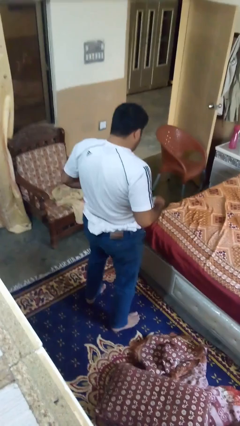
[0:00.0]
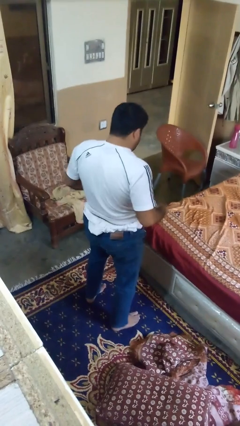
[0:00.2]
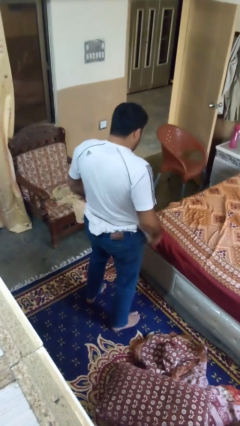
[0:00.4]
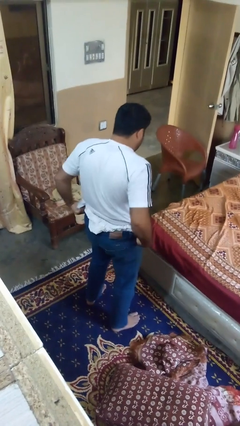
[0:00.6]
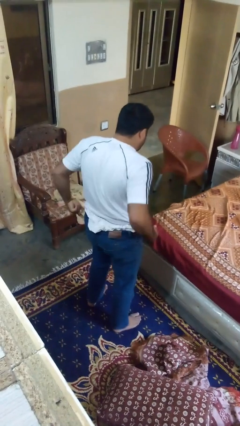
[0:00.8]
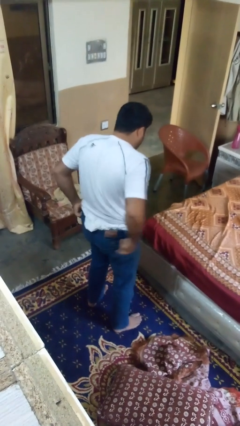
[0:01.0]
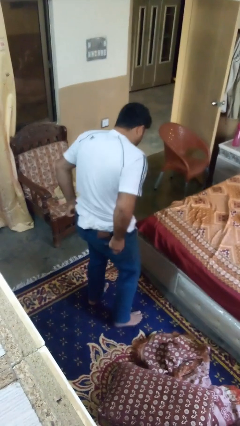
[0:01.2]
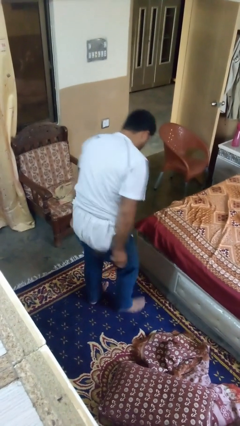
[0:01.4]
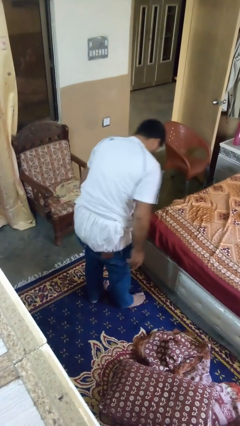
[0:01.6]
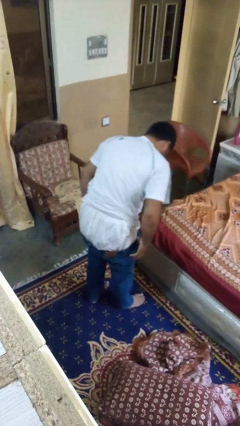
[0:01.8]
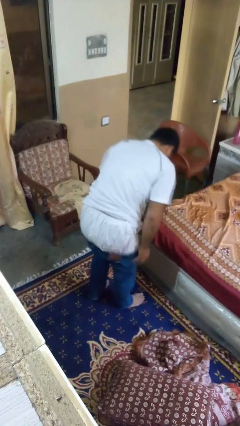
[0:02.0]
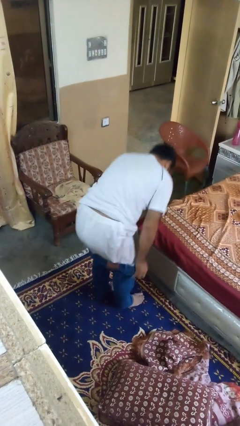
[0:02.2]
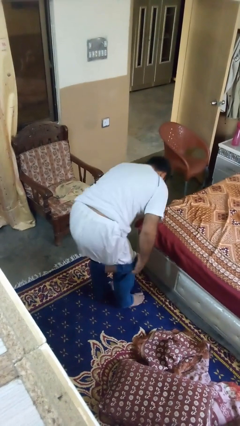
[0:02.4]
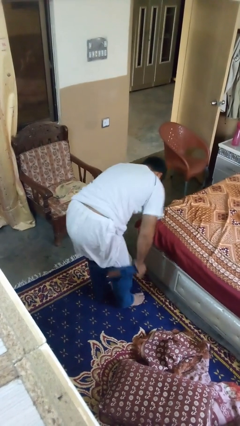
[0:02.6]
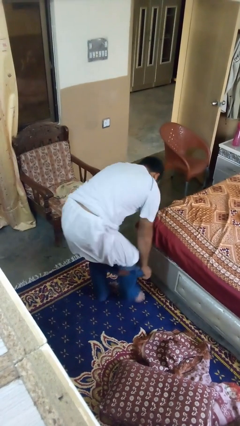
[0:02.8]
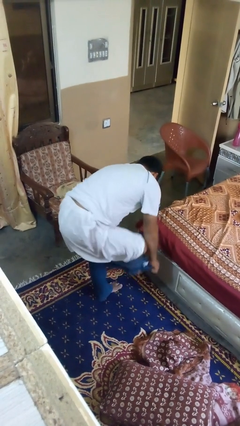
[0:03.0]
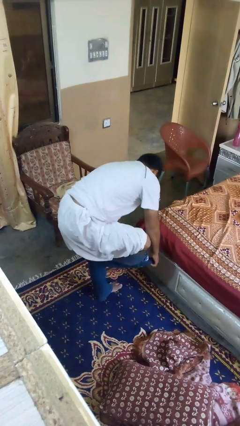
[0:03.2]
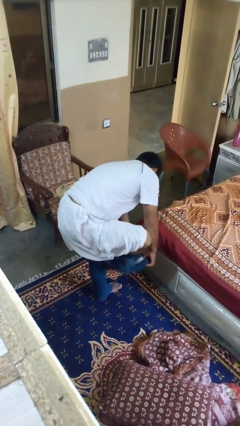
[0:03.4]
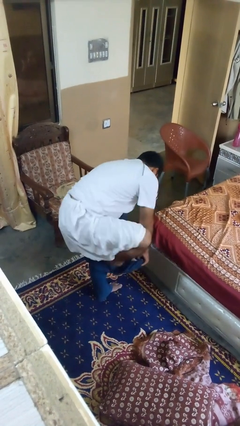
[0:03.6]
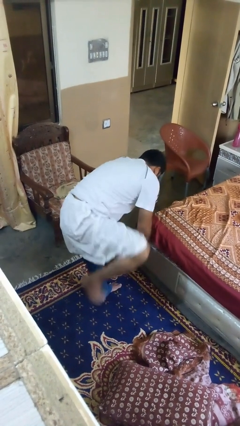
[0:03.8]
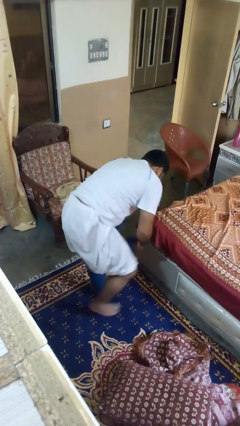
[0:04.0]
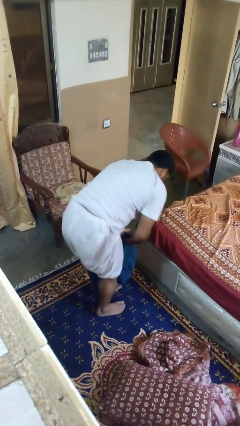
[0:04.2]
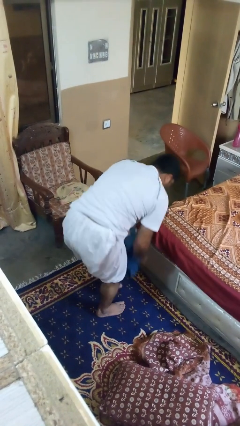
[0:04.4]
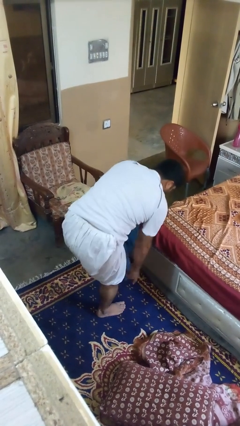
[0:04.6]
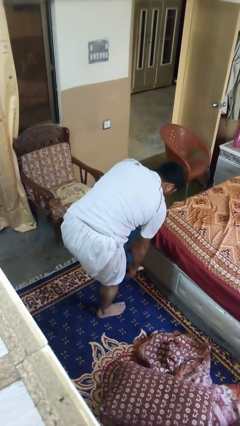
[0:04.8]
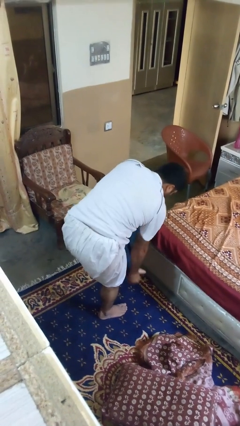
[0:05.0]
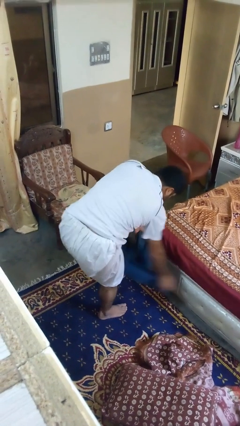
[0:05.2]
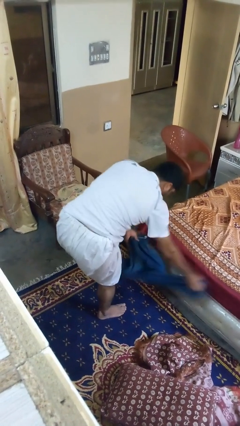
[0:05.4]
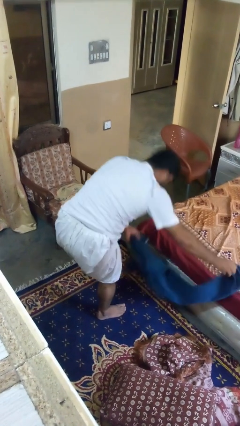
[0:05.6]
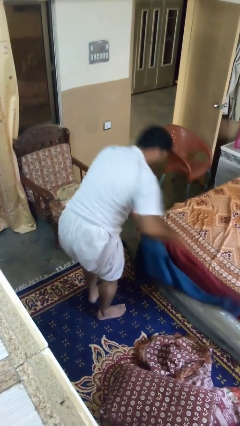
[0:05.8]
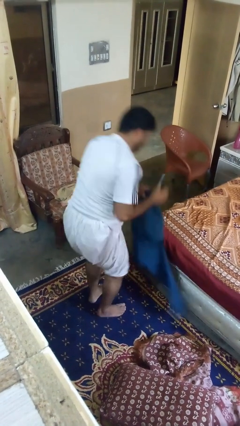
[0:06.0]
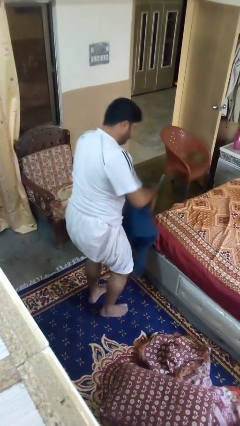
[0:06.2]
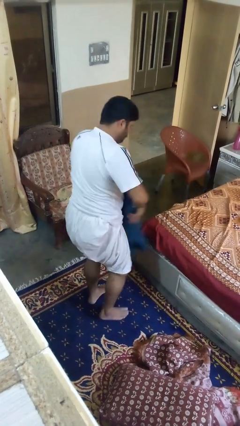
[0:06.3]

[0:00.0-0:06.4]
person takes off pants

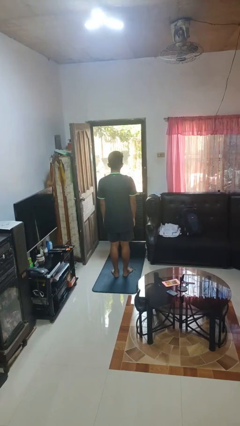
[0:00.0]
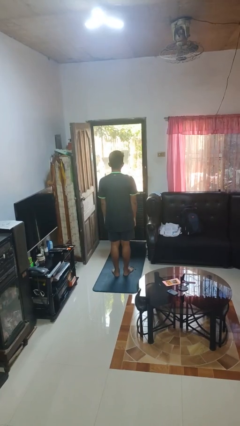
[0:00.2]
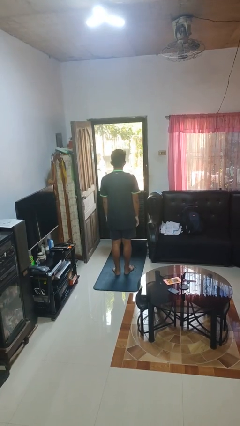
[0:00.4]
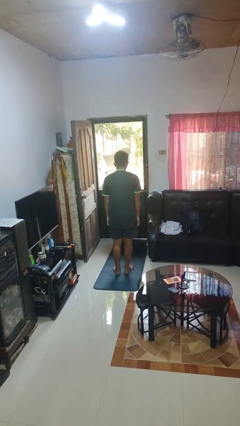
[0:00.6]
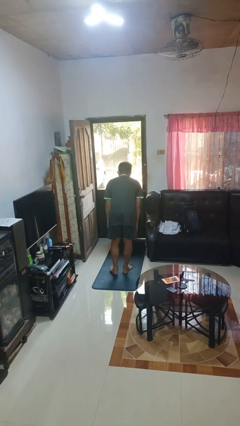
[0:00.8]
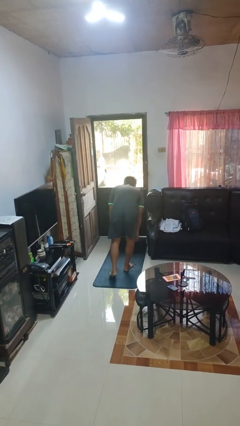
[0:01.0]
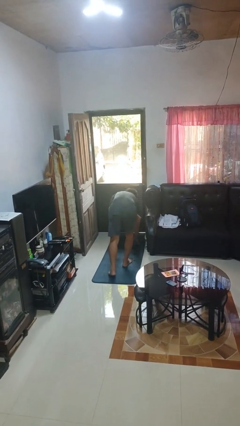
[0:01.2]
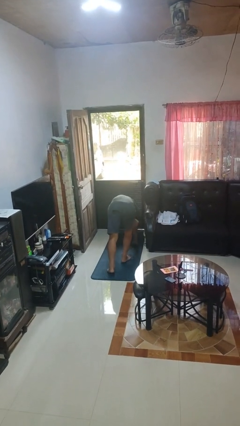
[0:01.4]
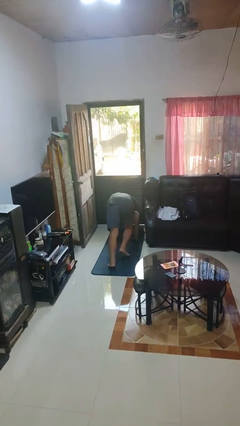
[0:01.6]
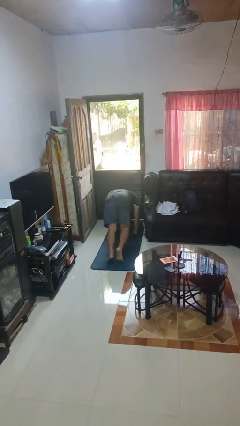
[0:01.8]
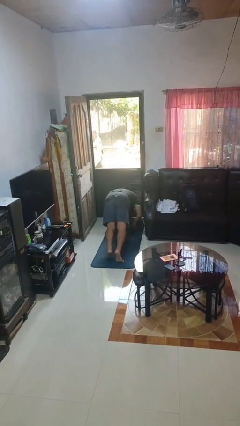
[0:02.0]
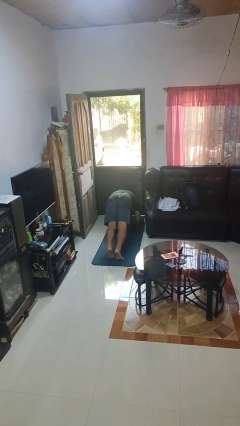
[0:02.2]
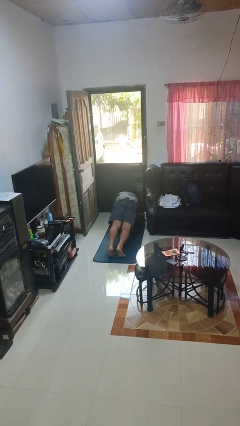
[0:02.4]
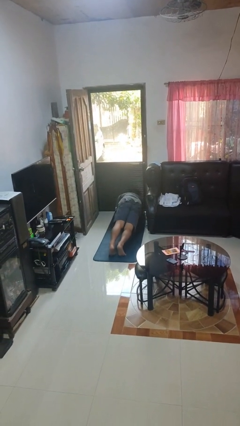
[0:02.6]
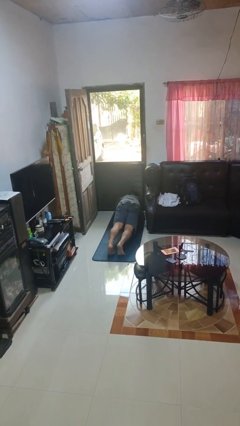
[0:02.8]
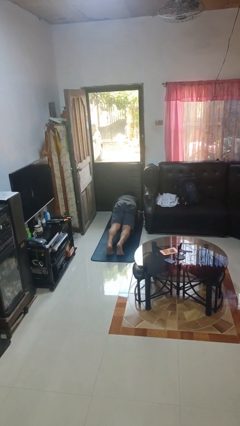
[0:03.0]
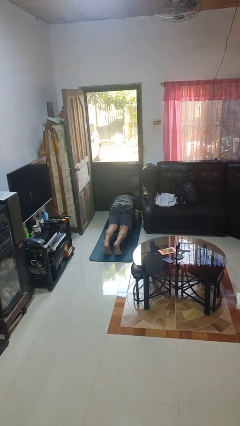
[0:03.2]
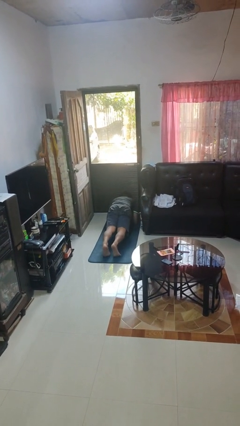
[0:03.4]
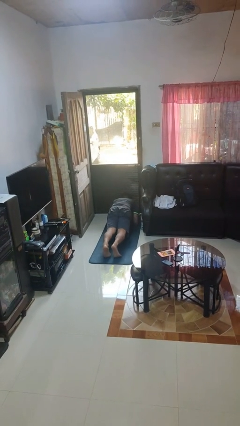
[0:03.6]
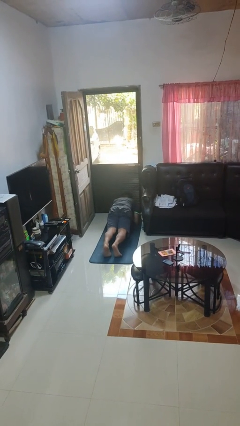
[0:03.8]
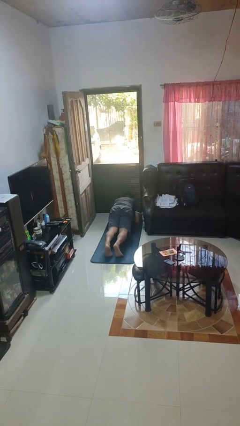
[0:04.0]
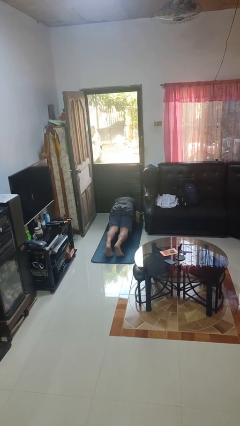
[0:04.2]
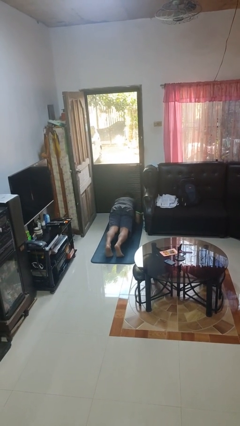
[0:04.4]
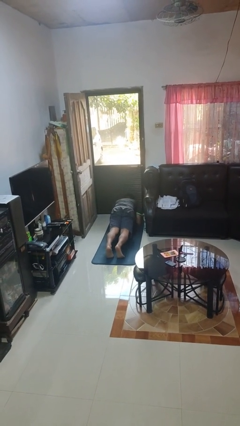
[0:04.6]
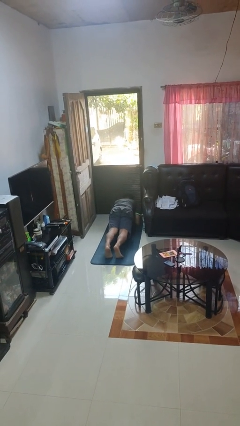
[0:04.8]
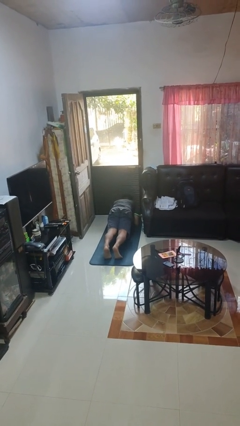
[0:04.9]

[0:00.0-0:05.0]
person exercises with plank

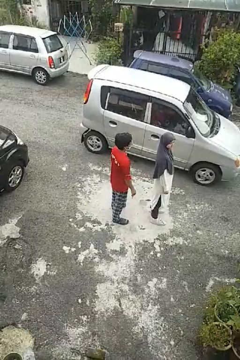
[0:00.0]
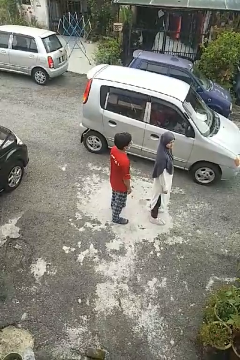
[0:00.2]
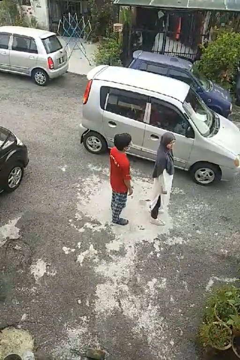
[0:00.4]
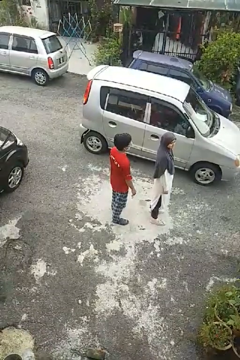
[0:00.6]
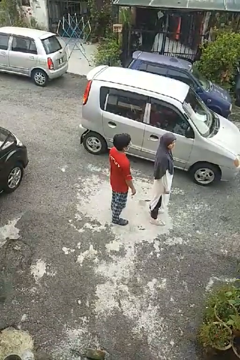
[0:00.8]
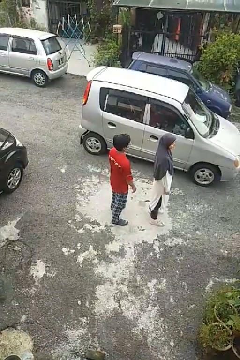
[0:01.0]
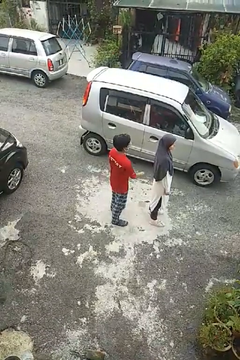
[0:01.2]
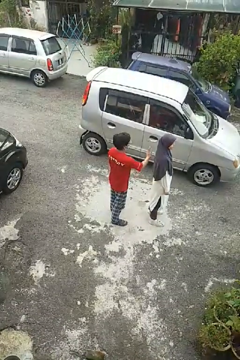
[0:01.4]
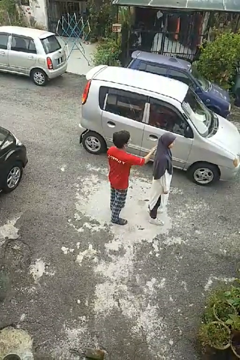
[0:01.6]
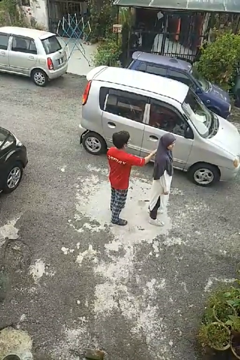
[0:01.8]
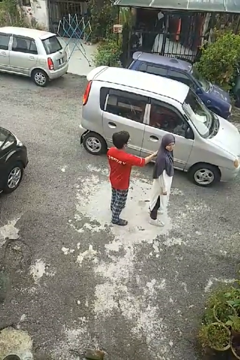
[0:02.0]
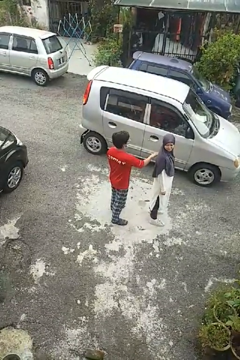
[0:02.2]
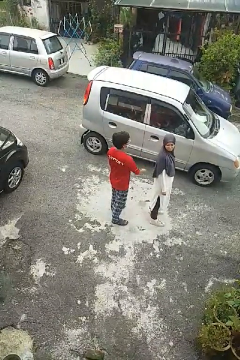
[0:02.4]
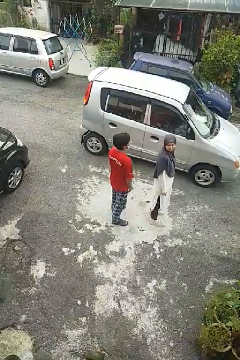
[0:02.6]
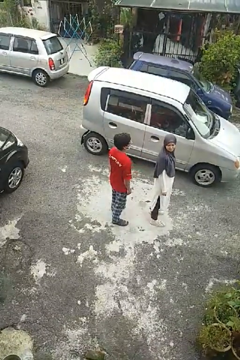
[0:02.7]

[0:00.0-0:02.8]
person touches back of person

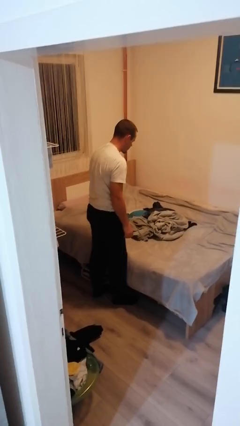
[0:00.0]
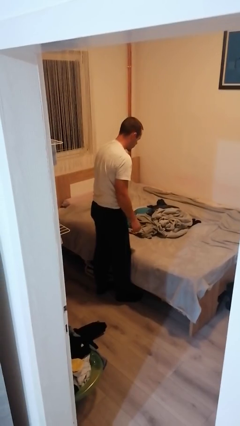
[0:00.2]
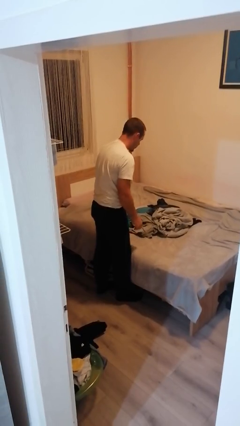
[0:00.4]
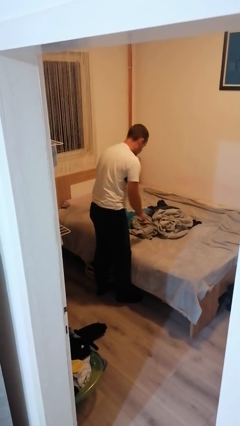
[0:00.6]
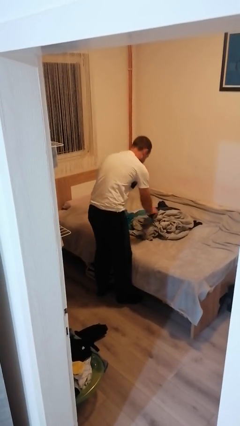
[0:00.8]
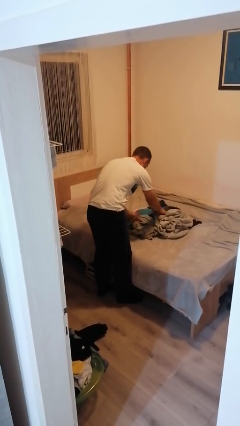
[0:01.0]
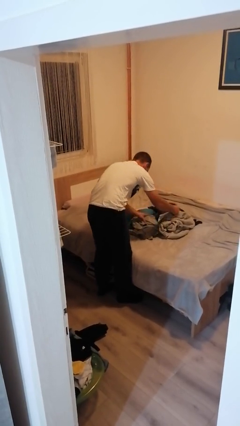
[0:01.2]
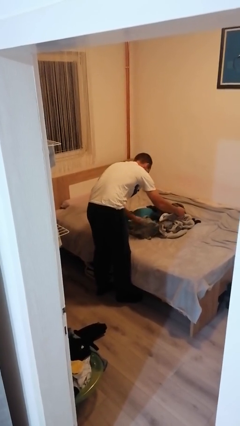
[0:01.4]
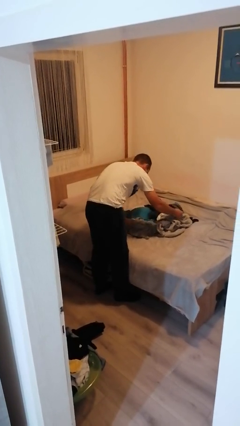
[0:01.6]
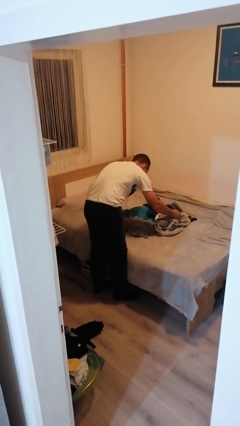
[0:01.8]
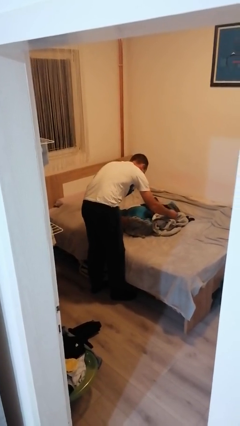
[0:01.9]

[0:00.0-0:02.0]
person searches under bed

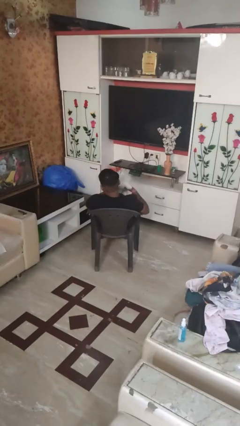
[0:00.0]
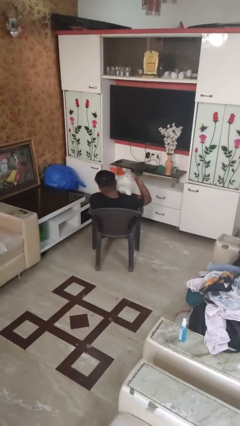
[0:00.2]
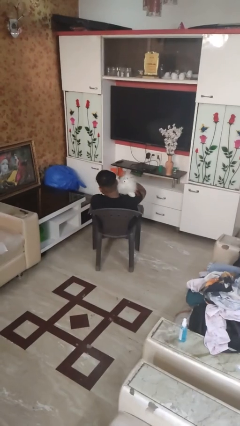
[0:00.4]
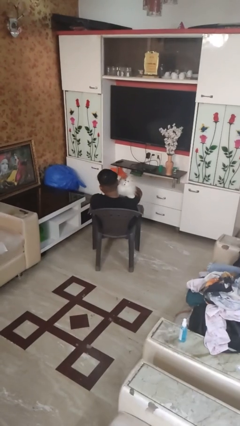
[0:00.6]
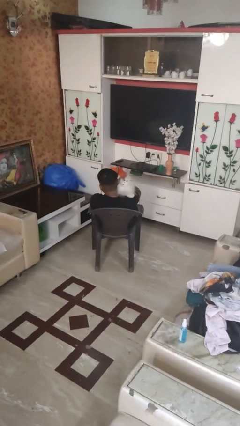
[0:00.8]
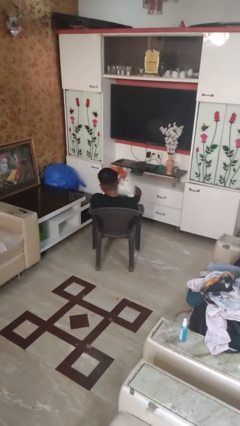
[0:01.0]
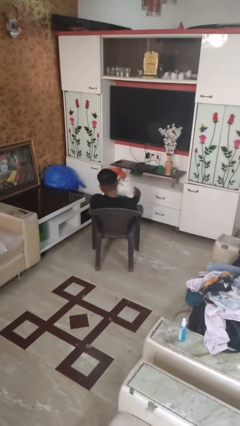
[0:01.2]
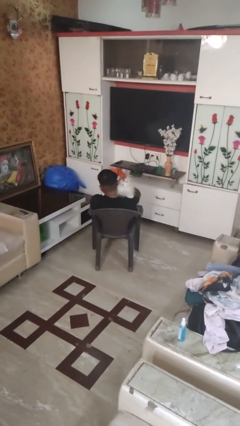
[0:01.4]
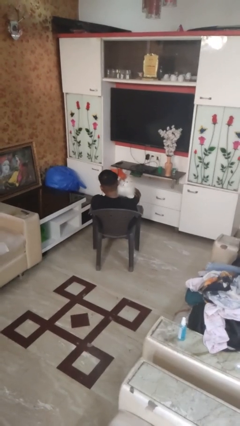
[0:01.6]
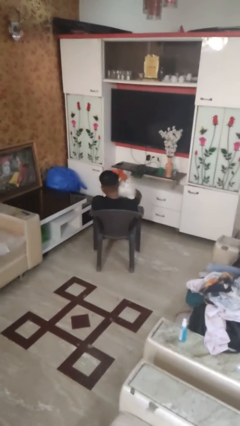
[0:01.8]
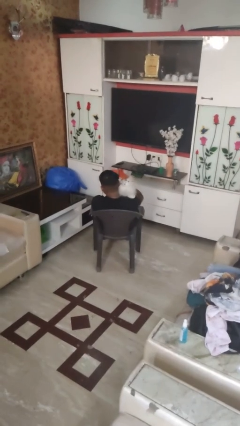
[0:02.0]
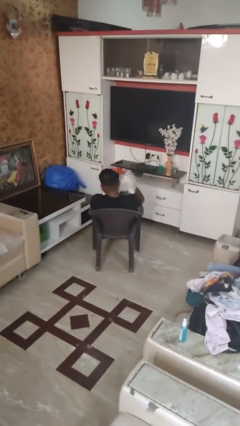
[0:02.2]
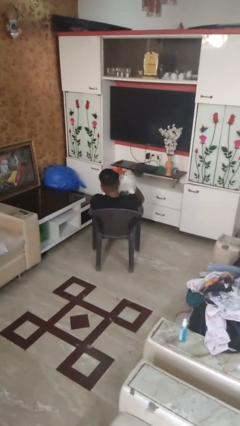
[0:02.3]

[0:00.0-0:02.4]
person hugs stuffed animal
